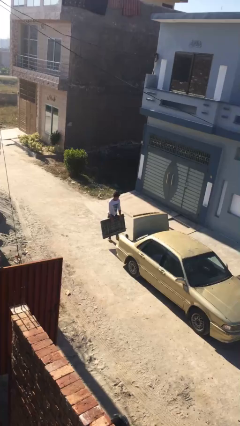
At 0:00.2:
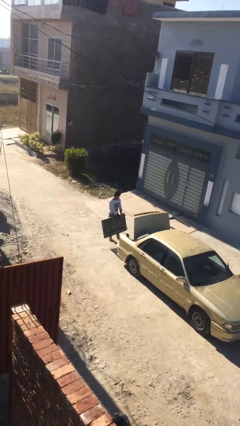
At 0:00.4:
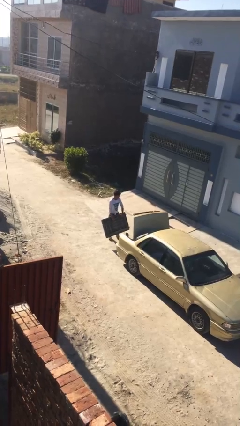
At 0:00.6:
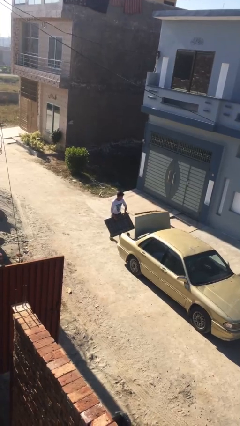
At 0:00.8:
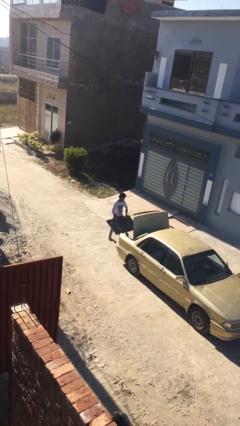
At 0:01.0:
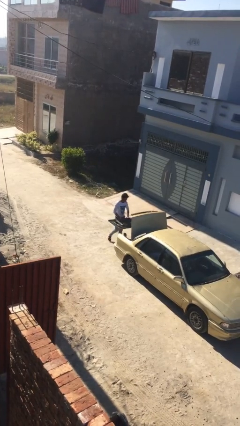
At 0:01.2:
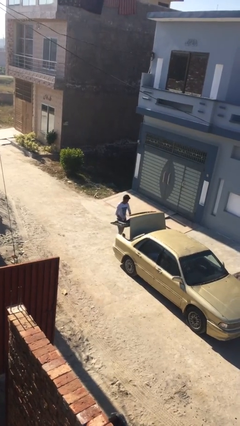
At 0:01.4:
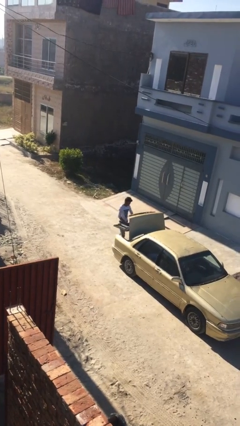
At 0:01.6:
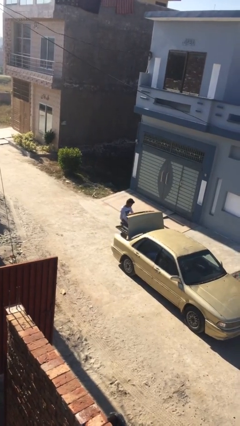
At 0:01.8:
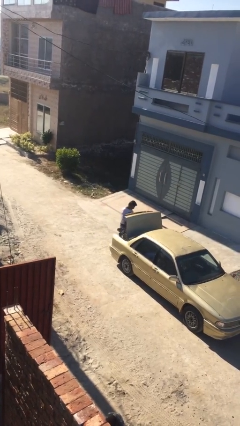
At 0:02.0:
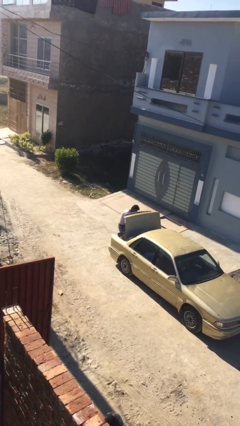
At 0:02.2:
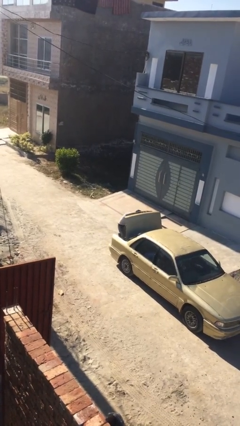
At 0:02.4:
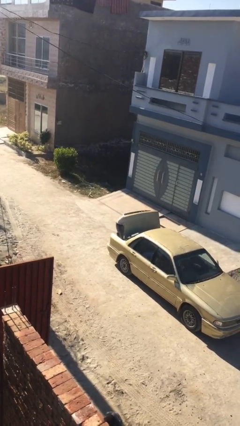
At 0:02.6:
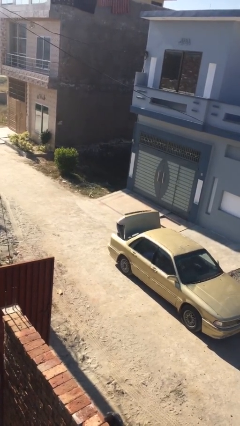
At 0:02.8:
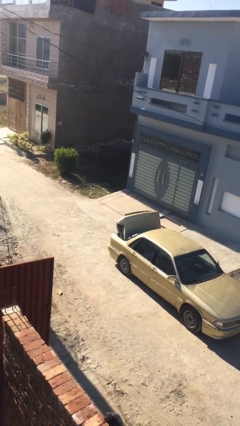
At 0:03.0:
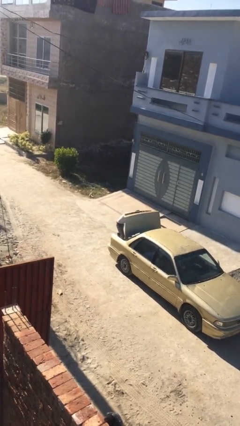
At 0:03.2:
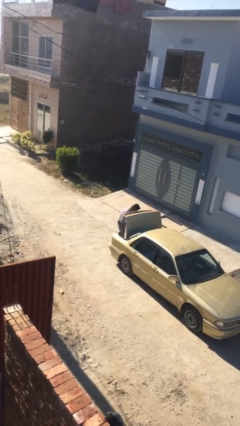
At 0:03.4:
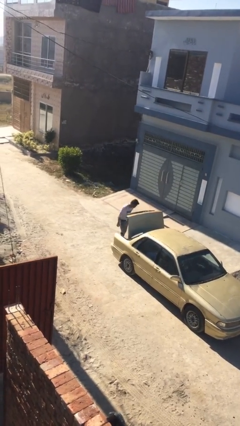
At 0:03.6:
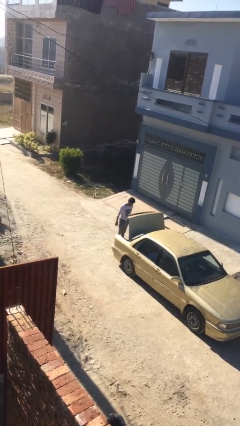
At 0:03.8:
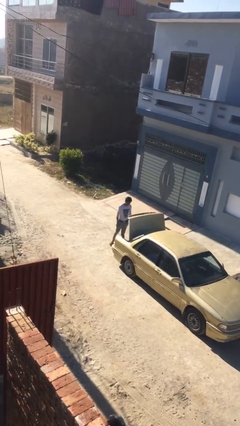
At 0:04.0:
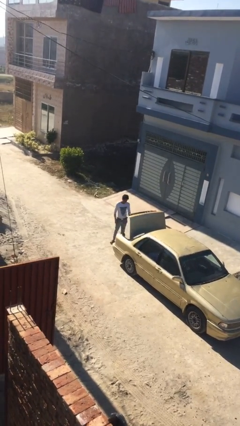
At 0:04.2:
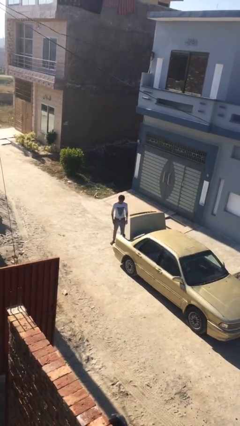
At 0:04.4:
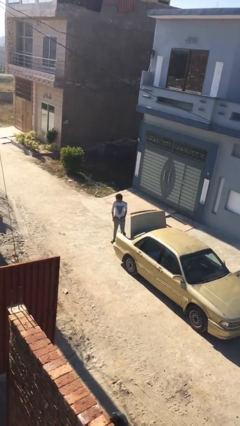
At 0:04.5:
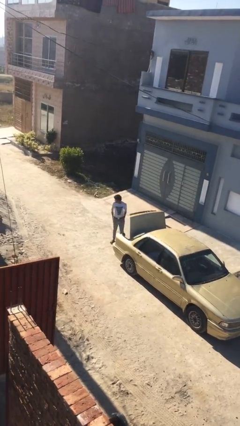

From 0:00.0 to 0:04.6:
person loads car

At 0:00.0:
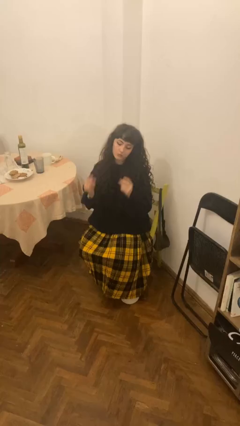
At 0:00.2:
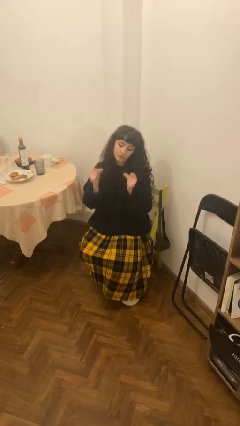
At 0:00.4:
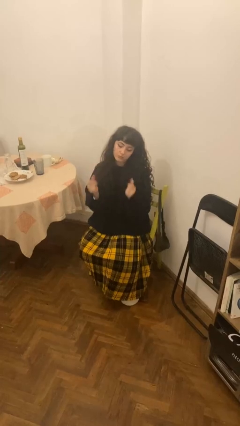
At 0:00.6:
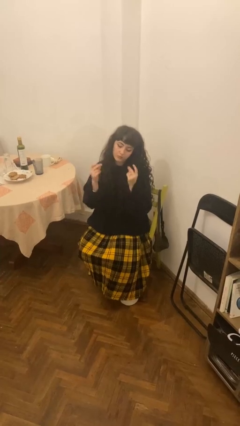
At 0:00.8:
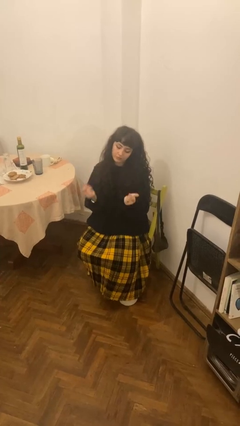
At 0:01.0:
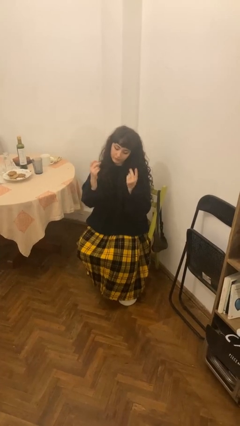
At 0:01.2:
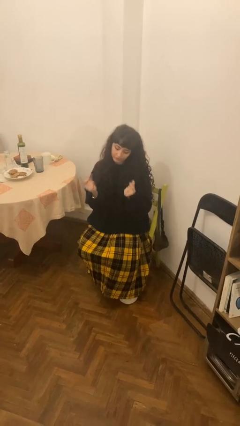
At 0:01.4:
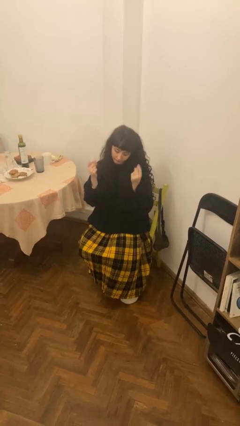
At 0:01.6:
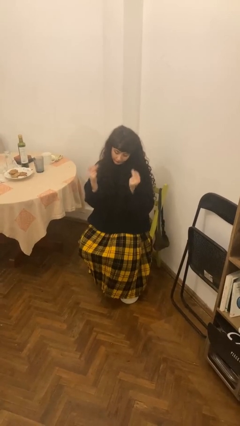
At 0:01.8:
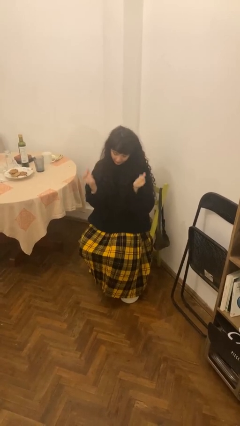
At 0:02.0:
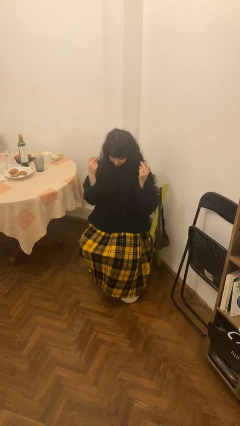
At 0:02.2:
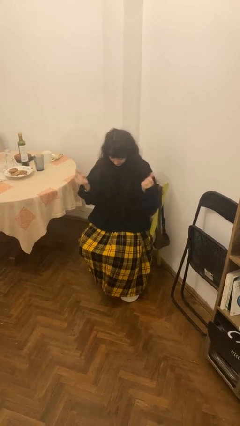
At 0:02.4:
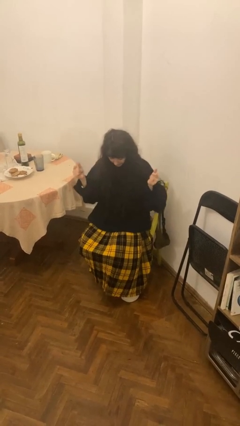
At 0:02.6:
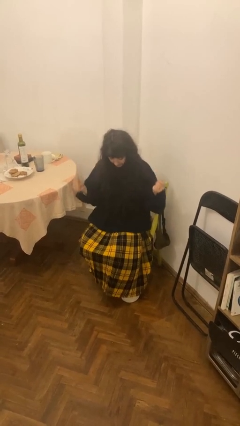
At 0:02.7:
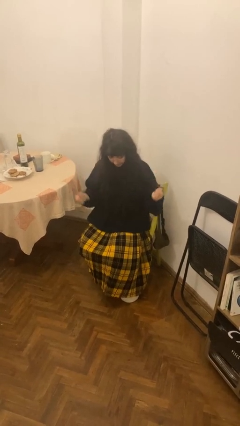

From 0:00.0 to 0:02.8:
person snaps fingers

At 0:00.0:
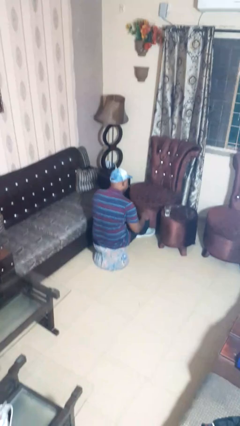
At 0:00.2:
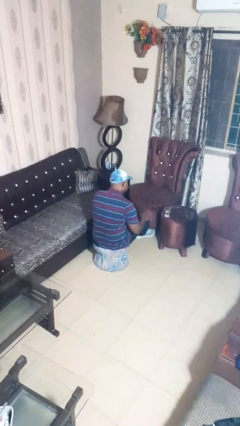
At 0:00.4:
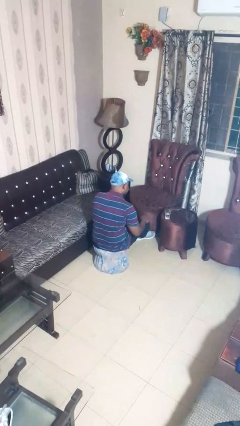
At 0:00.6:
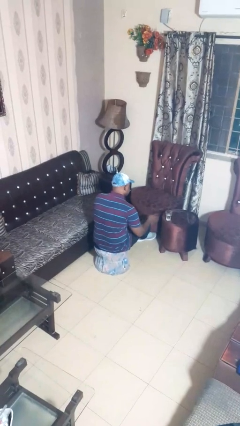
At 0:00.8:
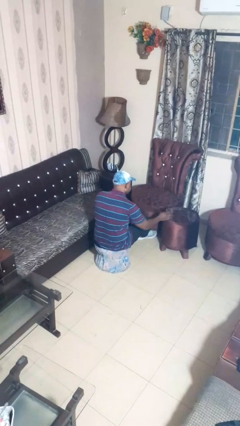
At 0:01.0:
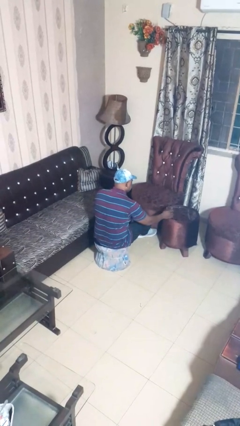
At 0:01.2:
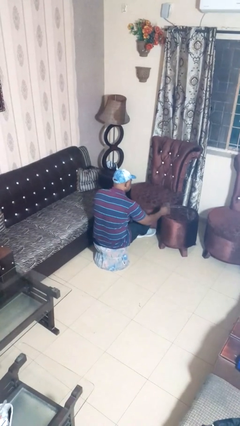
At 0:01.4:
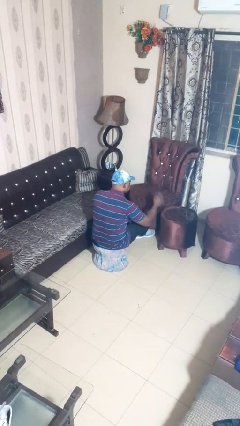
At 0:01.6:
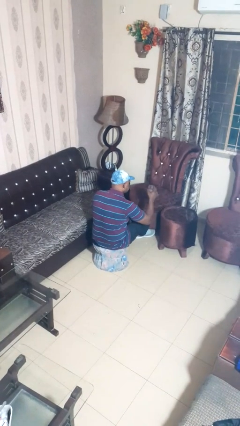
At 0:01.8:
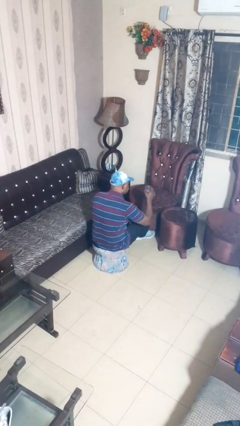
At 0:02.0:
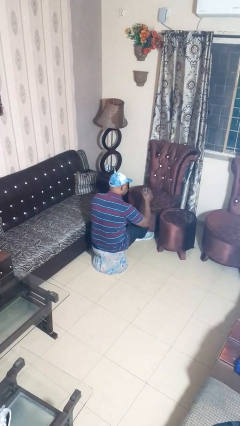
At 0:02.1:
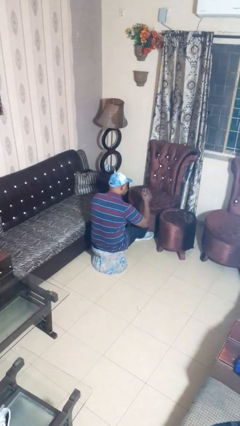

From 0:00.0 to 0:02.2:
person picks up object from table

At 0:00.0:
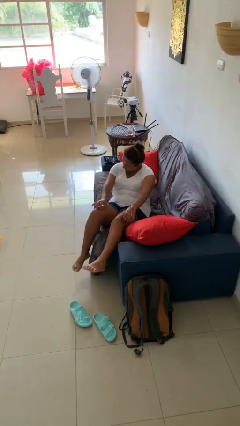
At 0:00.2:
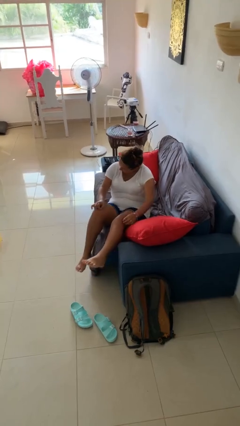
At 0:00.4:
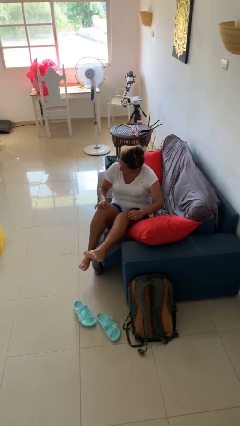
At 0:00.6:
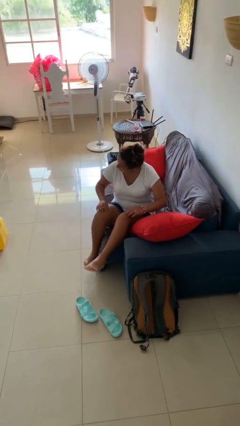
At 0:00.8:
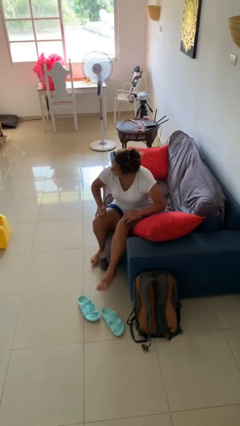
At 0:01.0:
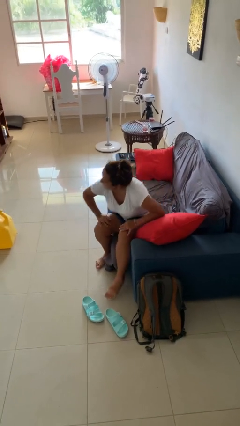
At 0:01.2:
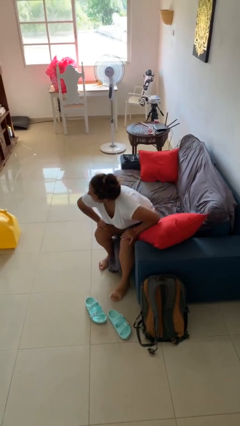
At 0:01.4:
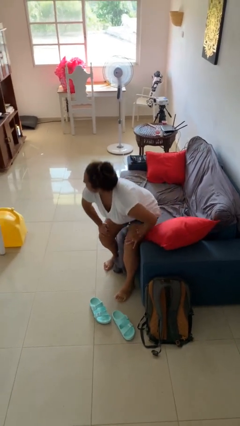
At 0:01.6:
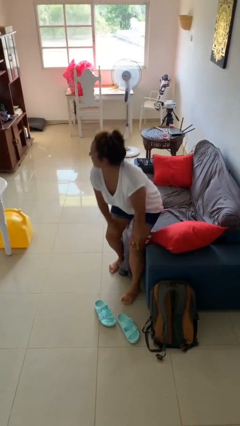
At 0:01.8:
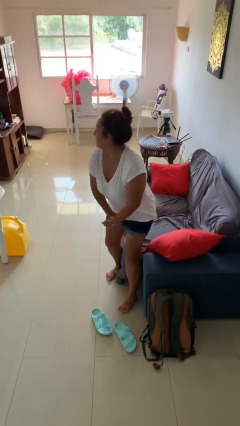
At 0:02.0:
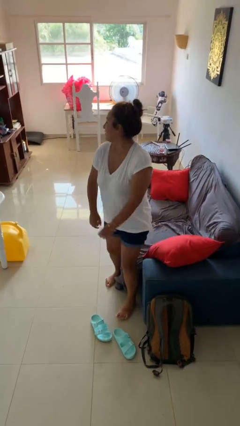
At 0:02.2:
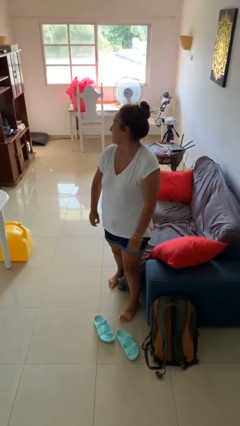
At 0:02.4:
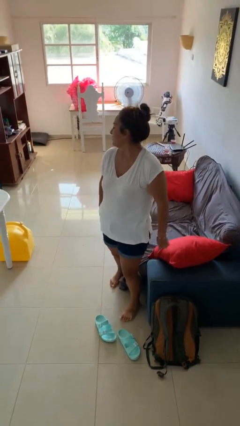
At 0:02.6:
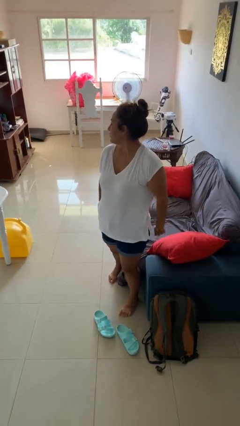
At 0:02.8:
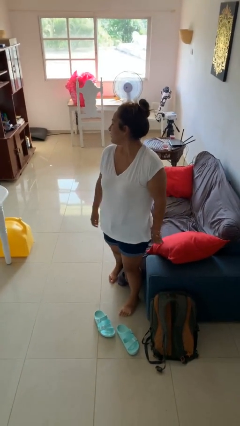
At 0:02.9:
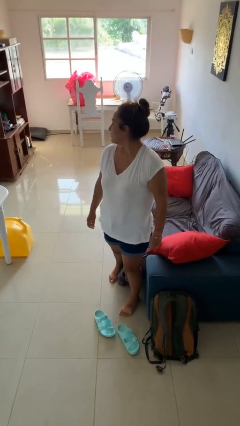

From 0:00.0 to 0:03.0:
person stands up

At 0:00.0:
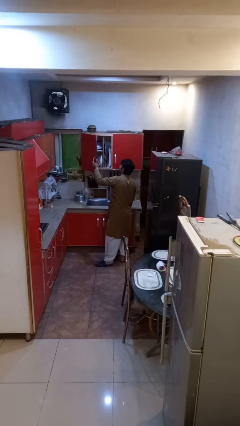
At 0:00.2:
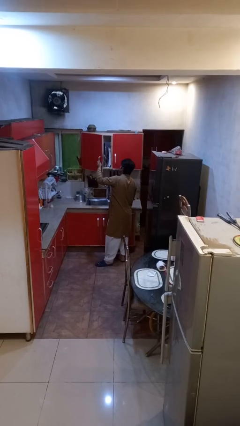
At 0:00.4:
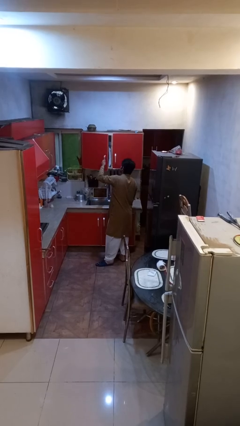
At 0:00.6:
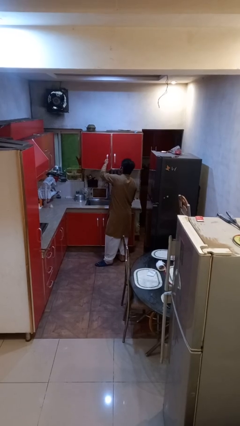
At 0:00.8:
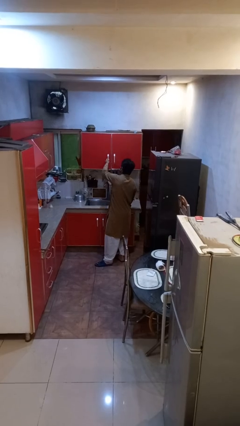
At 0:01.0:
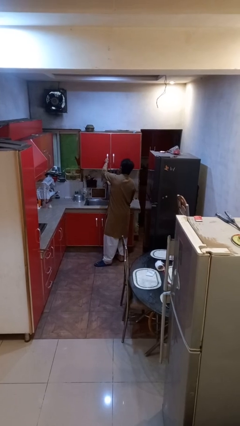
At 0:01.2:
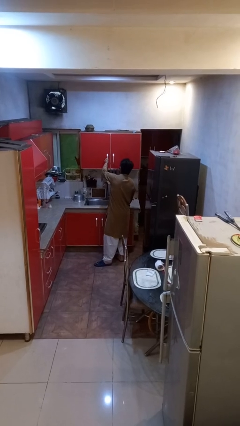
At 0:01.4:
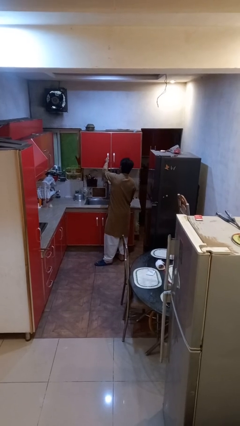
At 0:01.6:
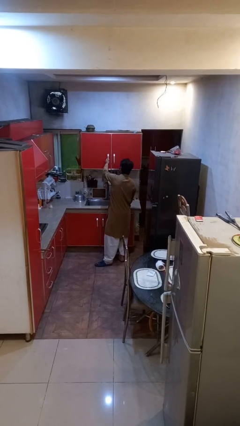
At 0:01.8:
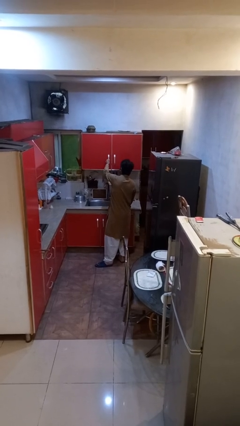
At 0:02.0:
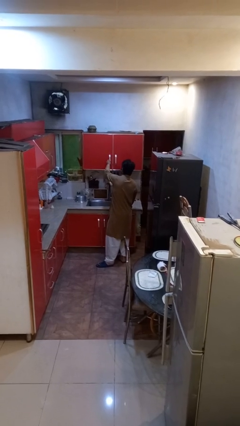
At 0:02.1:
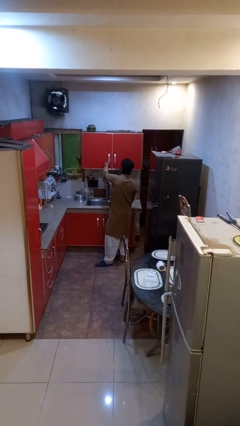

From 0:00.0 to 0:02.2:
person closes cabinet

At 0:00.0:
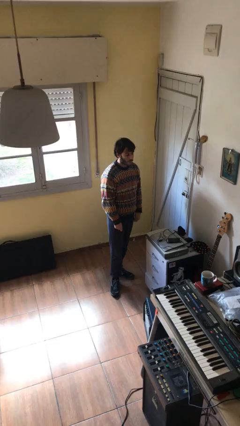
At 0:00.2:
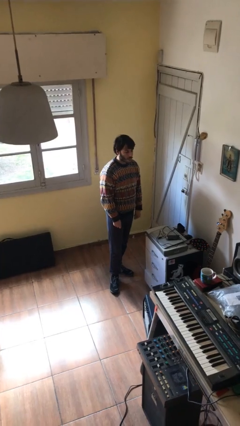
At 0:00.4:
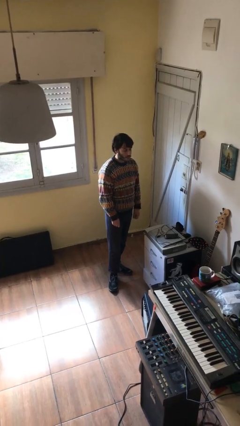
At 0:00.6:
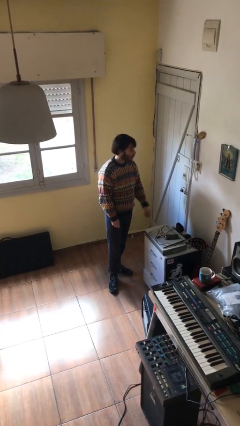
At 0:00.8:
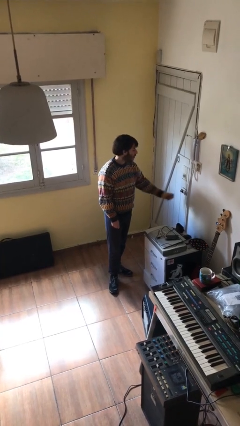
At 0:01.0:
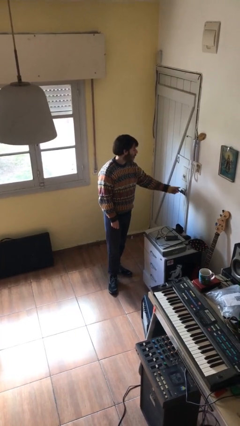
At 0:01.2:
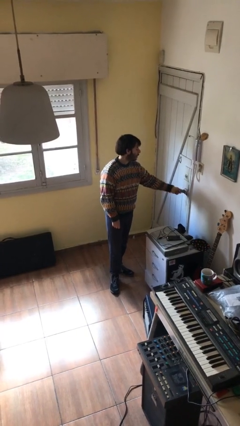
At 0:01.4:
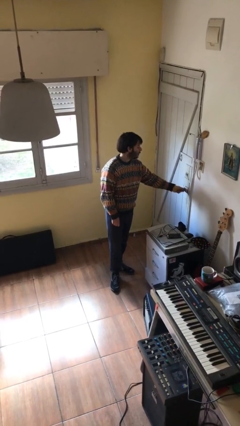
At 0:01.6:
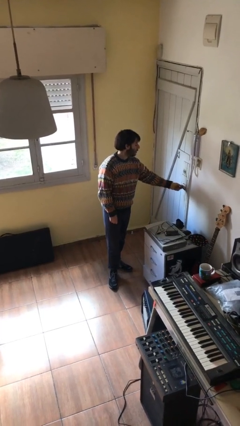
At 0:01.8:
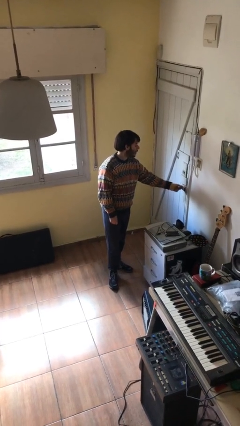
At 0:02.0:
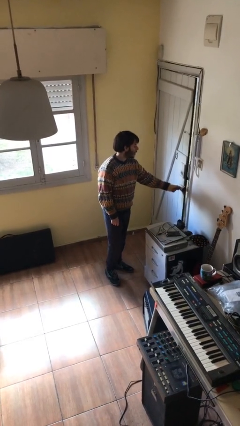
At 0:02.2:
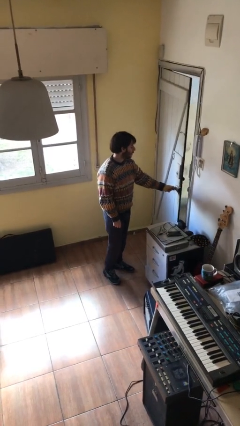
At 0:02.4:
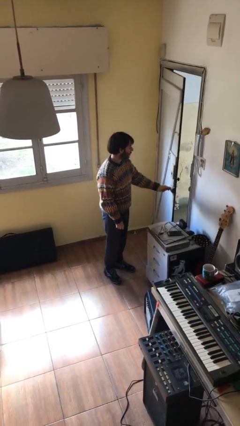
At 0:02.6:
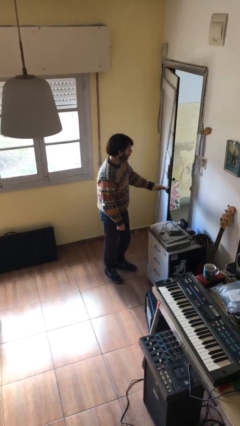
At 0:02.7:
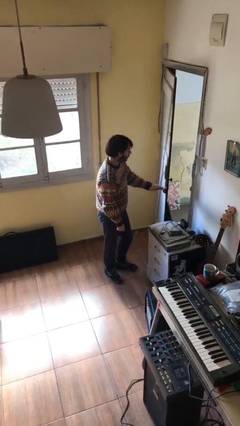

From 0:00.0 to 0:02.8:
person opens facility door
